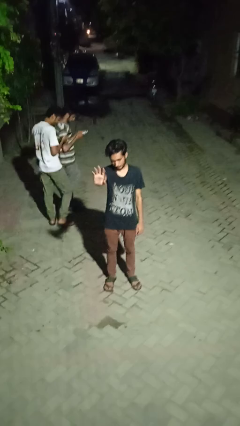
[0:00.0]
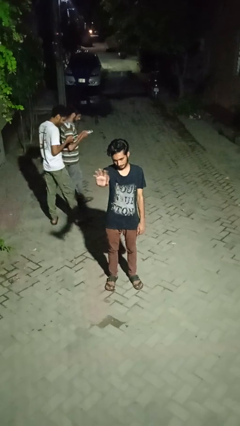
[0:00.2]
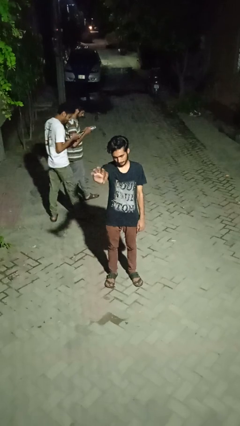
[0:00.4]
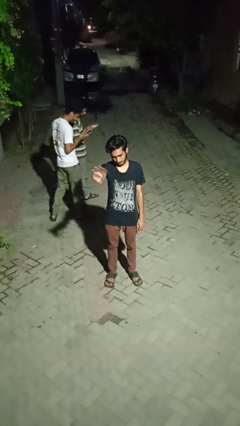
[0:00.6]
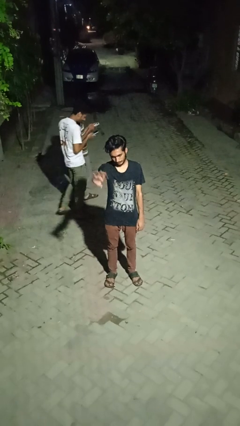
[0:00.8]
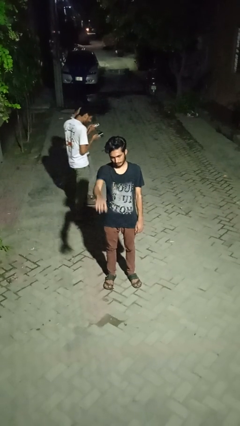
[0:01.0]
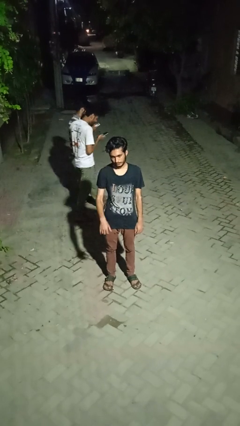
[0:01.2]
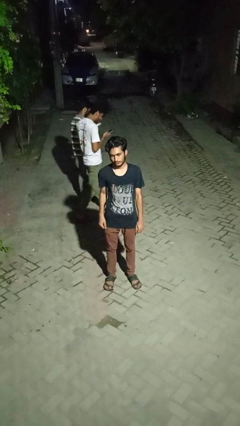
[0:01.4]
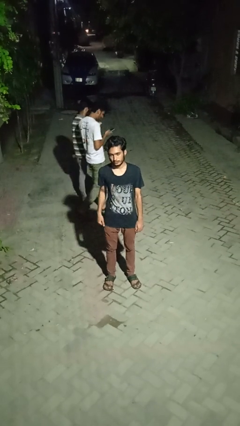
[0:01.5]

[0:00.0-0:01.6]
person waves at person

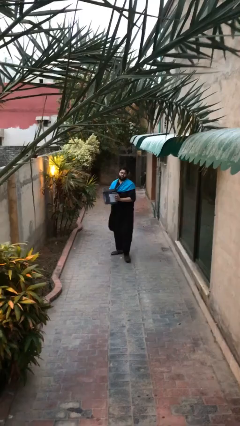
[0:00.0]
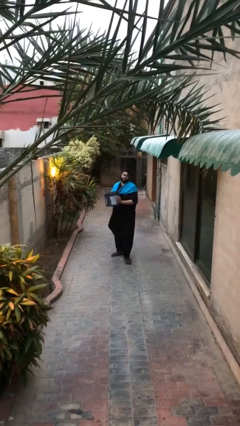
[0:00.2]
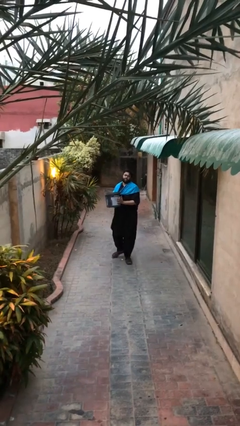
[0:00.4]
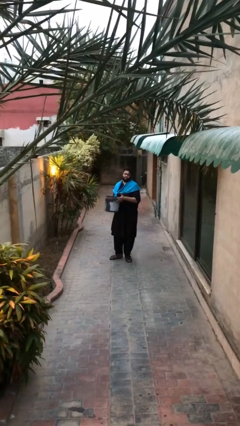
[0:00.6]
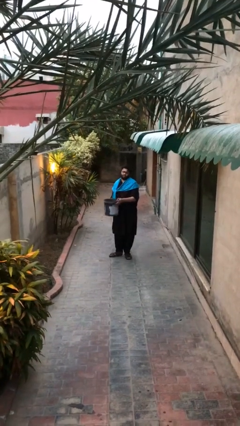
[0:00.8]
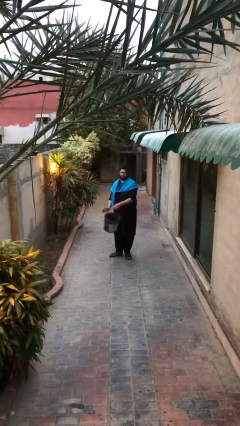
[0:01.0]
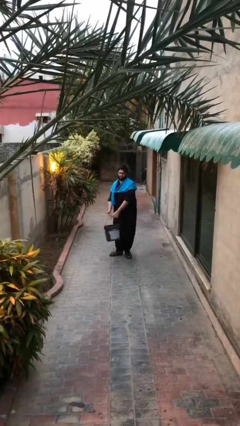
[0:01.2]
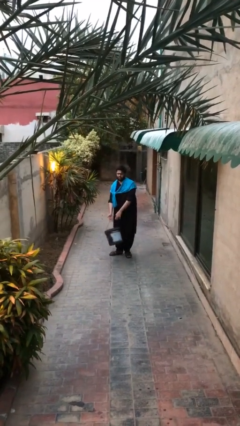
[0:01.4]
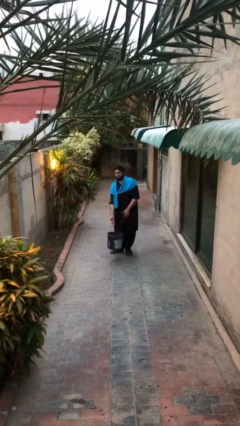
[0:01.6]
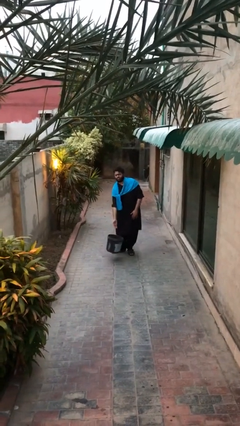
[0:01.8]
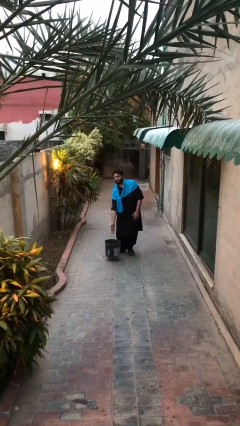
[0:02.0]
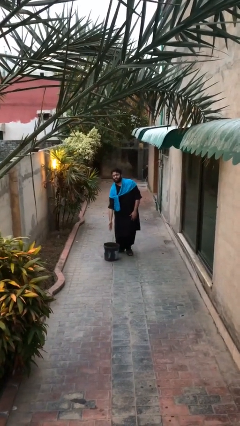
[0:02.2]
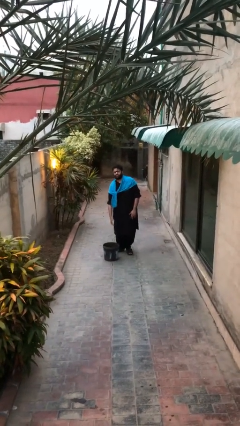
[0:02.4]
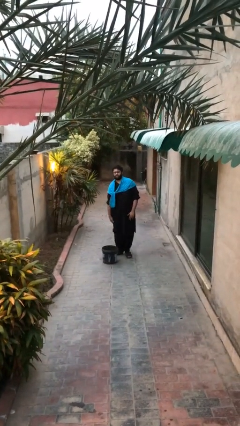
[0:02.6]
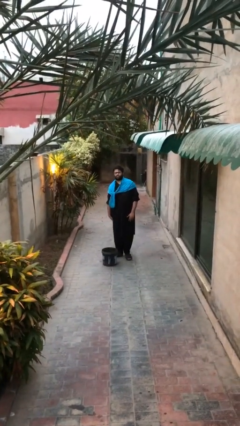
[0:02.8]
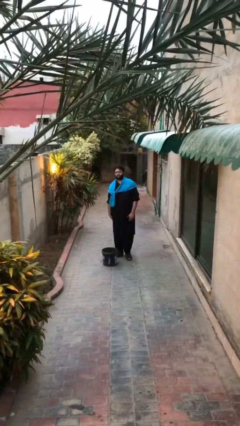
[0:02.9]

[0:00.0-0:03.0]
person puts down object on floor

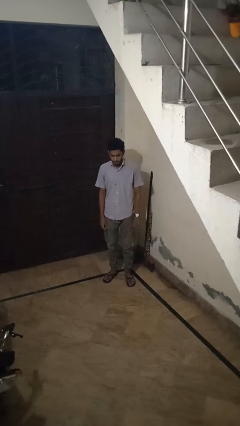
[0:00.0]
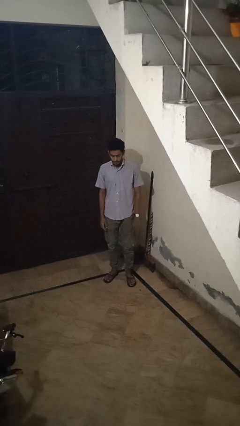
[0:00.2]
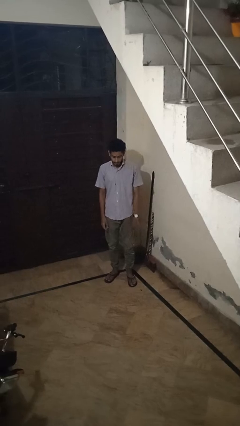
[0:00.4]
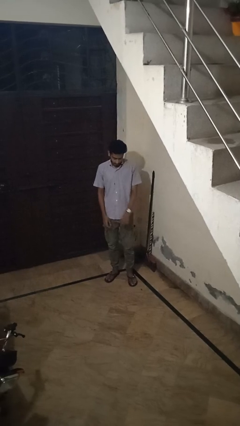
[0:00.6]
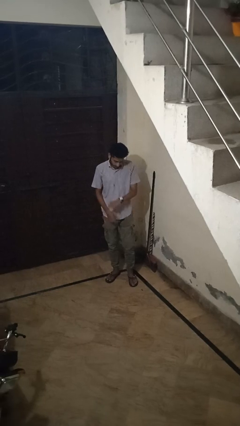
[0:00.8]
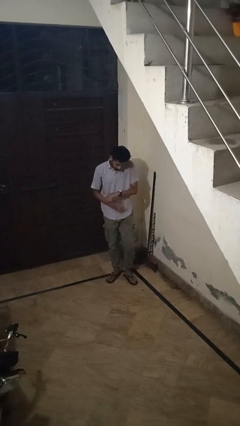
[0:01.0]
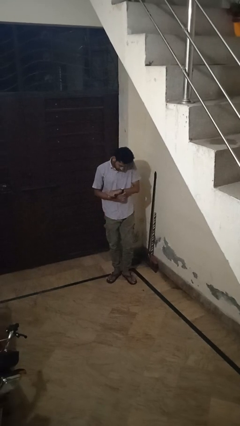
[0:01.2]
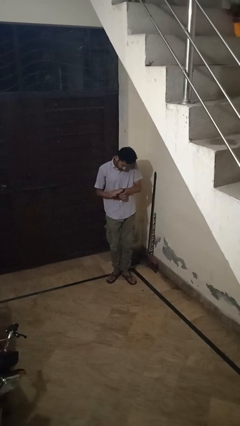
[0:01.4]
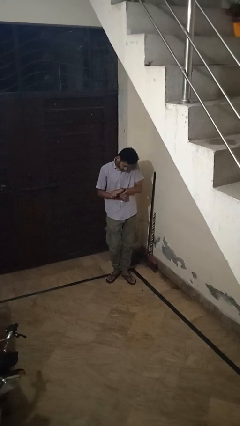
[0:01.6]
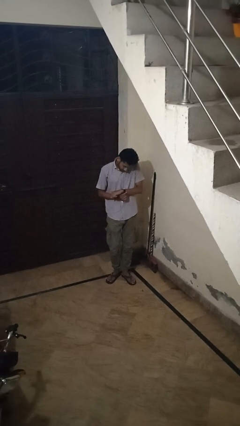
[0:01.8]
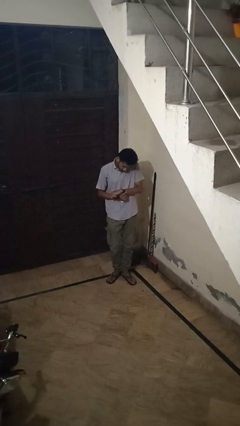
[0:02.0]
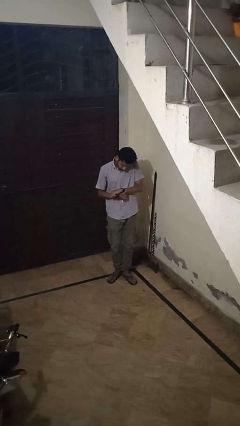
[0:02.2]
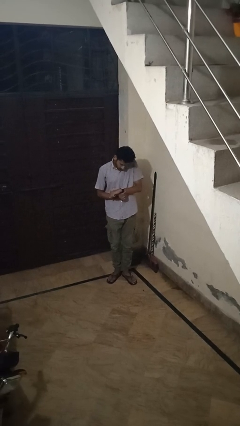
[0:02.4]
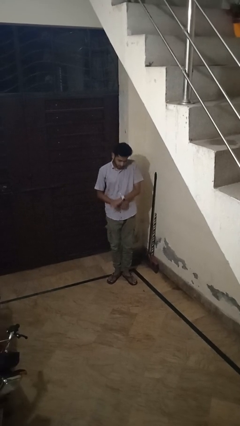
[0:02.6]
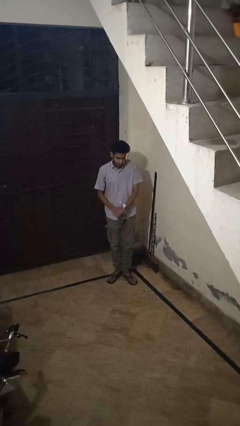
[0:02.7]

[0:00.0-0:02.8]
person looks at wristwatch

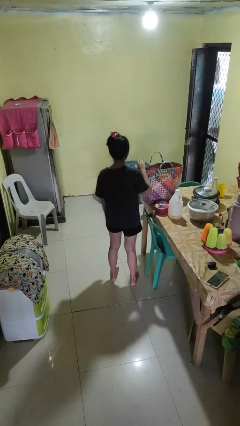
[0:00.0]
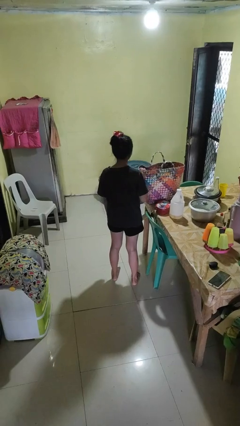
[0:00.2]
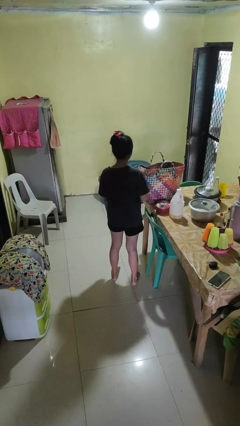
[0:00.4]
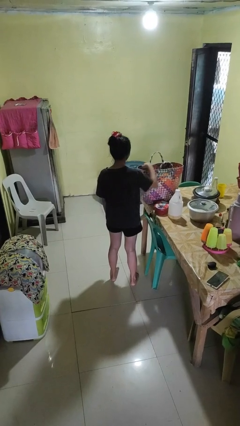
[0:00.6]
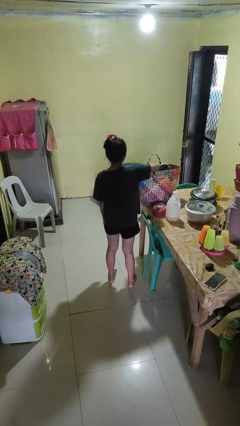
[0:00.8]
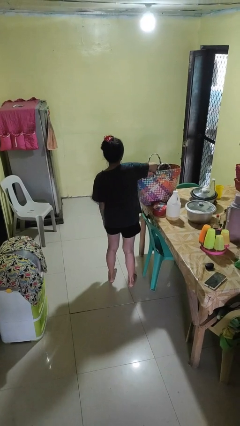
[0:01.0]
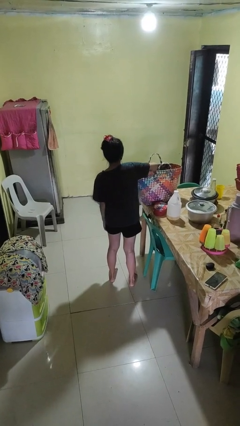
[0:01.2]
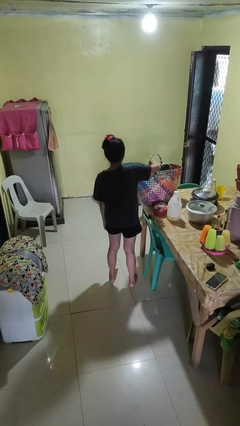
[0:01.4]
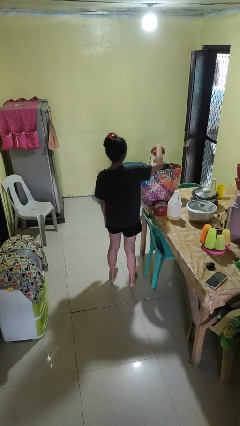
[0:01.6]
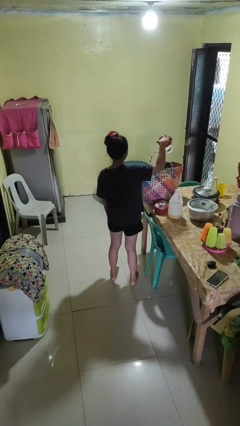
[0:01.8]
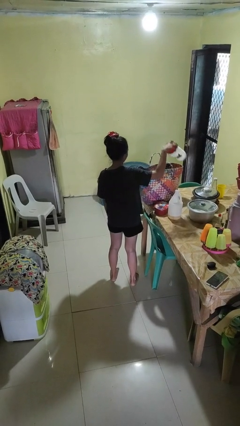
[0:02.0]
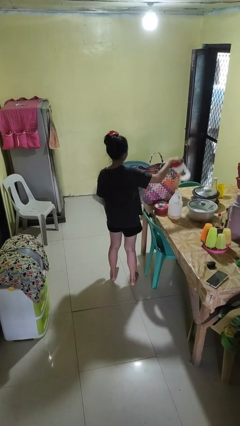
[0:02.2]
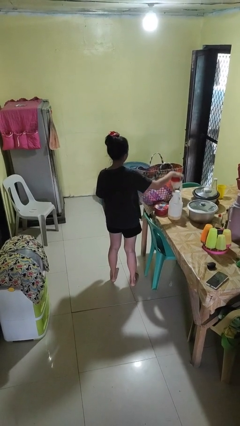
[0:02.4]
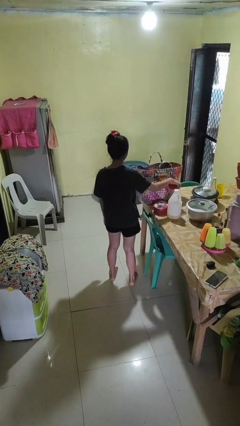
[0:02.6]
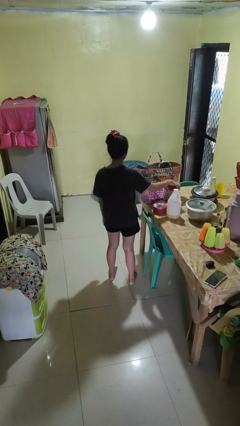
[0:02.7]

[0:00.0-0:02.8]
person takes object from basket

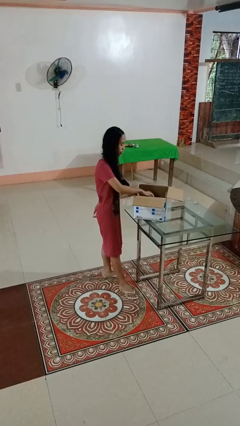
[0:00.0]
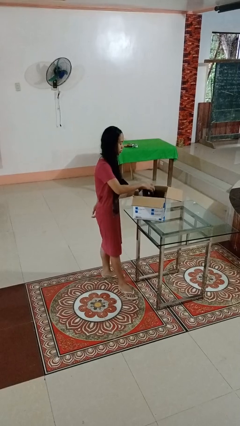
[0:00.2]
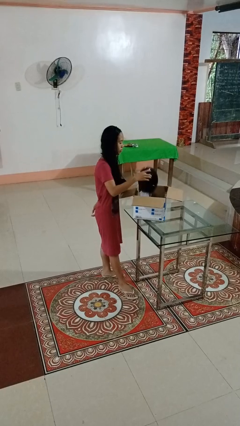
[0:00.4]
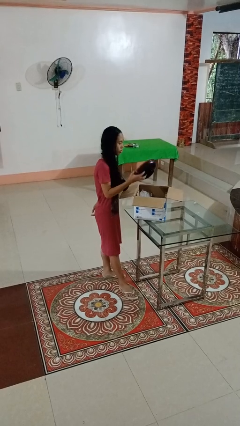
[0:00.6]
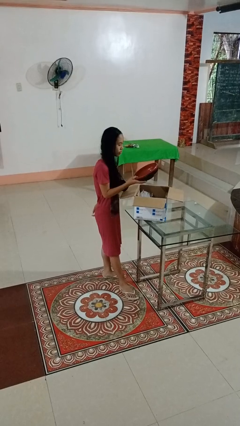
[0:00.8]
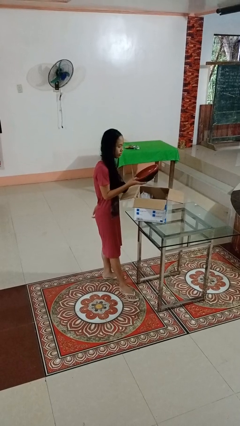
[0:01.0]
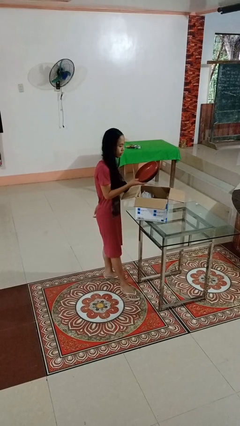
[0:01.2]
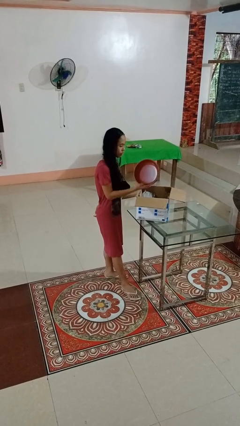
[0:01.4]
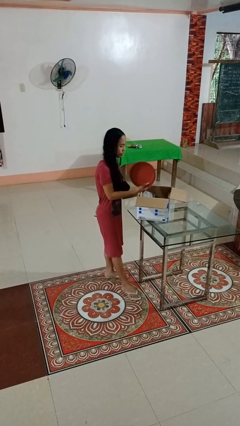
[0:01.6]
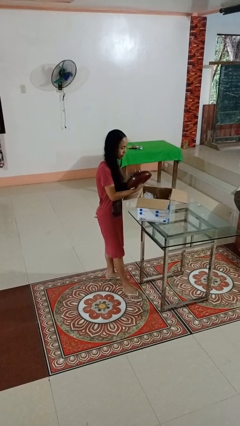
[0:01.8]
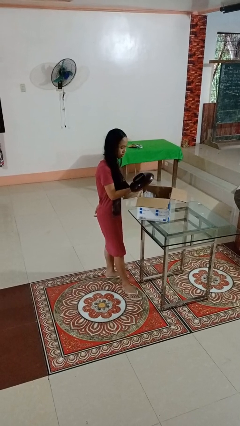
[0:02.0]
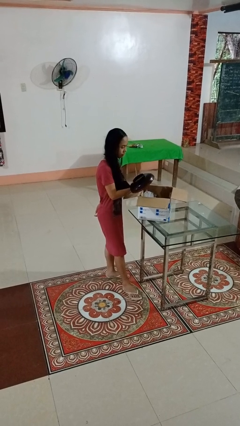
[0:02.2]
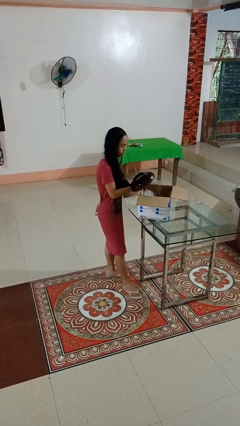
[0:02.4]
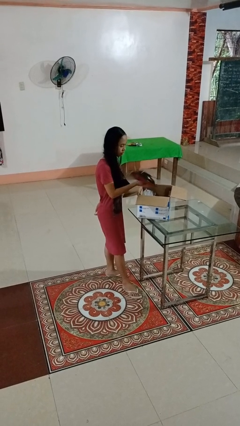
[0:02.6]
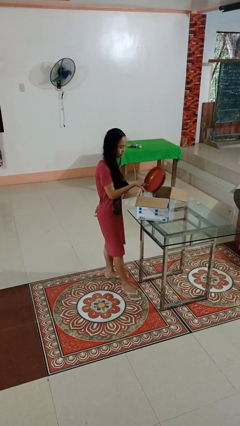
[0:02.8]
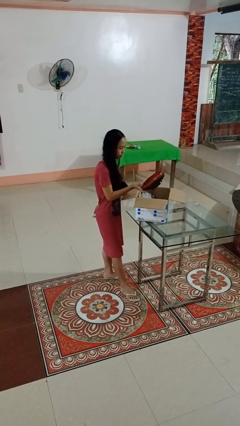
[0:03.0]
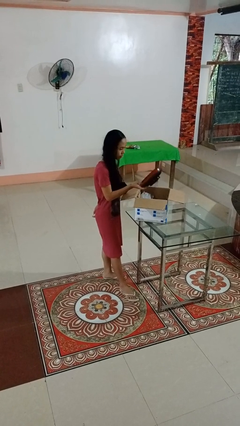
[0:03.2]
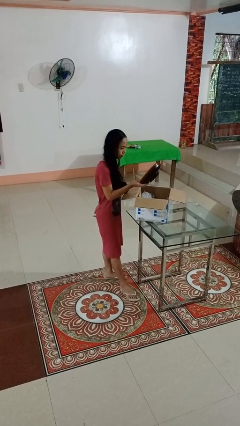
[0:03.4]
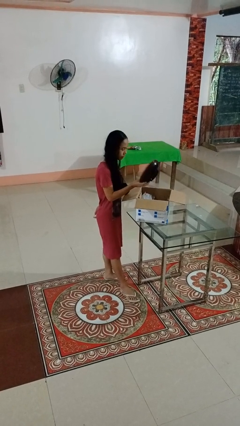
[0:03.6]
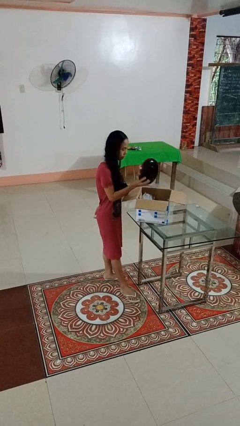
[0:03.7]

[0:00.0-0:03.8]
person takes object from box

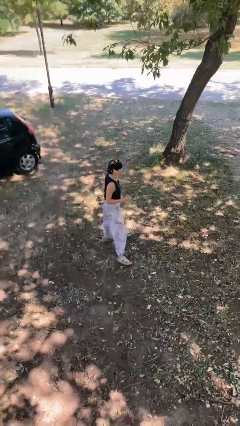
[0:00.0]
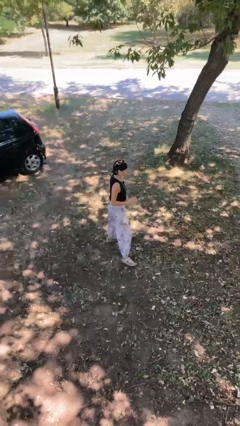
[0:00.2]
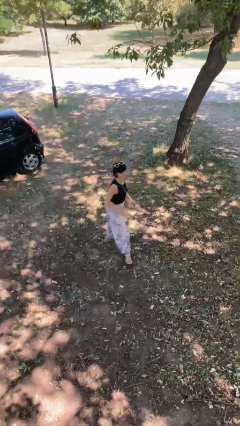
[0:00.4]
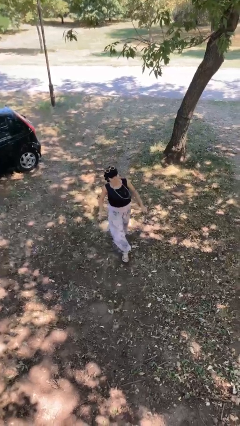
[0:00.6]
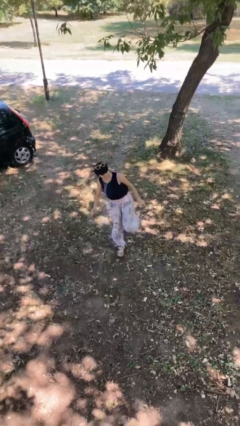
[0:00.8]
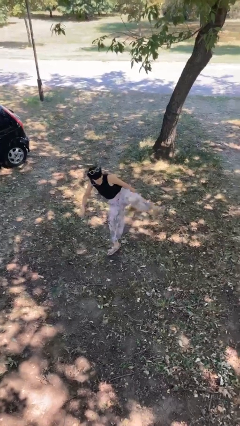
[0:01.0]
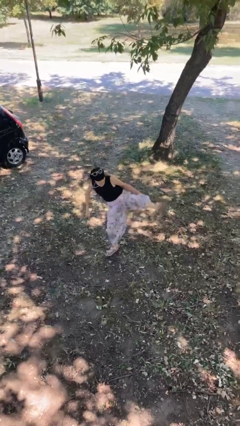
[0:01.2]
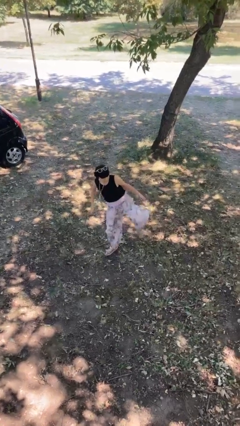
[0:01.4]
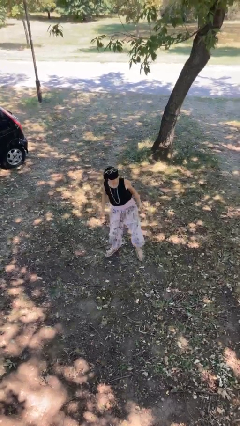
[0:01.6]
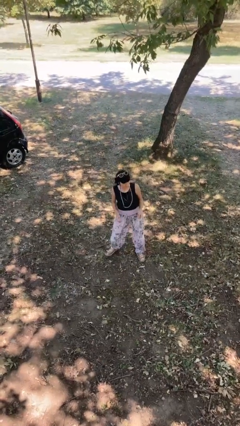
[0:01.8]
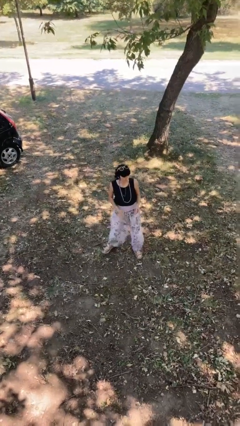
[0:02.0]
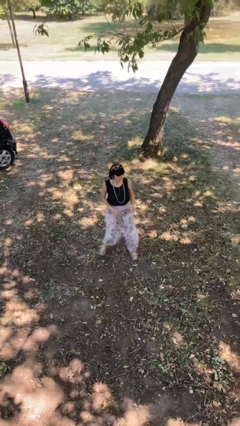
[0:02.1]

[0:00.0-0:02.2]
person karate kicks

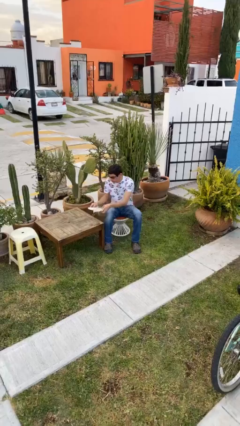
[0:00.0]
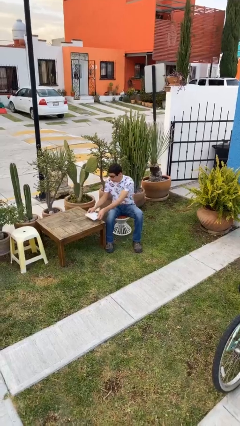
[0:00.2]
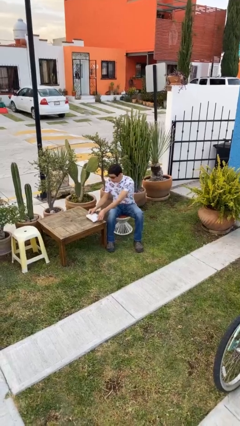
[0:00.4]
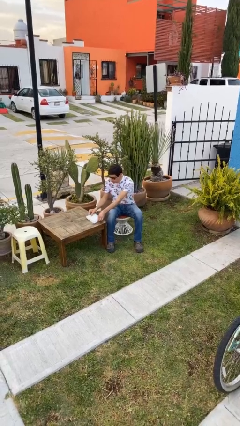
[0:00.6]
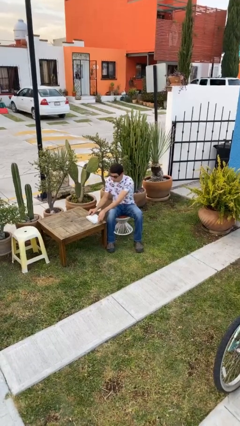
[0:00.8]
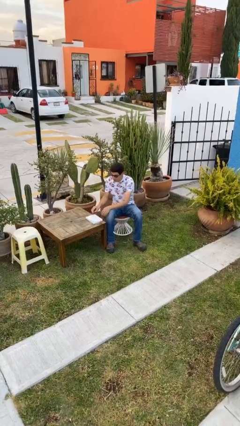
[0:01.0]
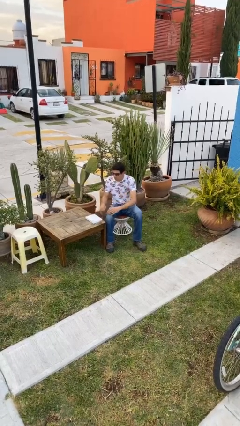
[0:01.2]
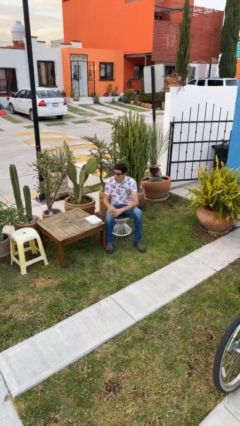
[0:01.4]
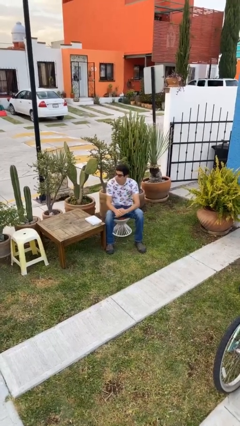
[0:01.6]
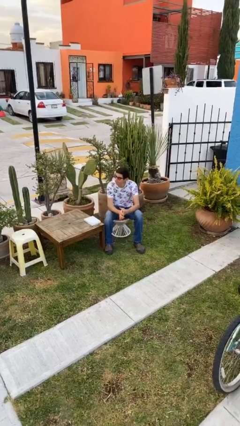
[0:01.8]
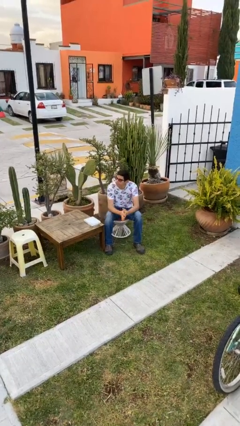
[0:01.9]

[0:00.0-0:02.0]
person puts down object on table
